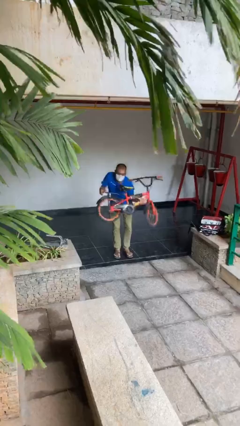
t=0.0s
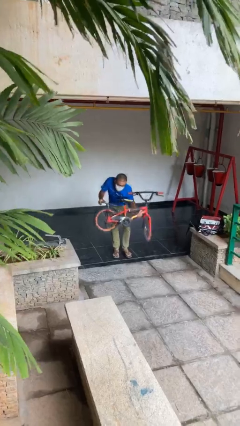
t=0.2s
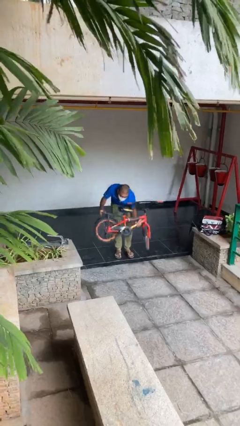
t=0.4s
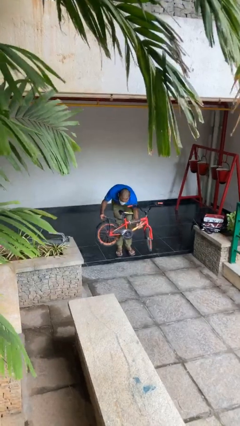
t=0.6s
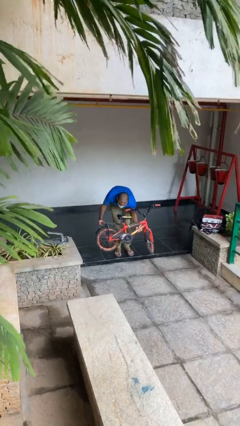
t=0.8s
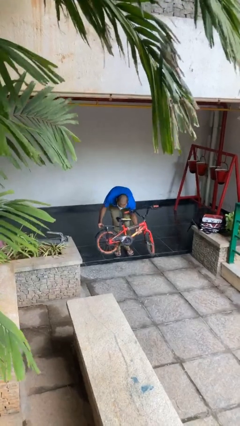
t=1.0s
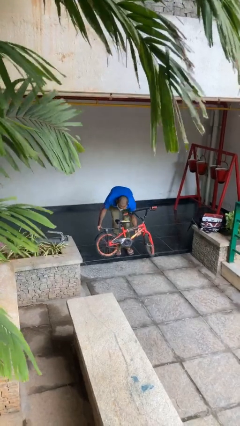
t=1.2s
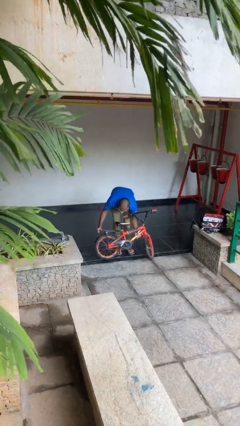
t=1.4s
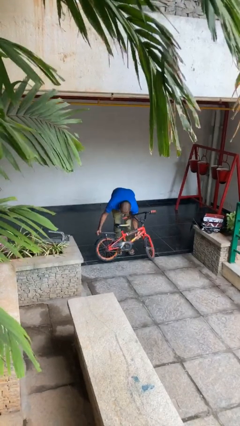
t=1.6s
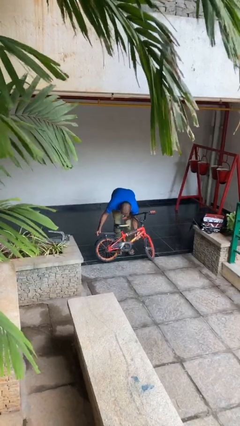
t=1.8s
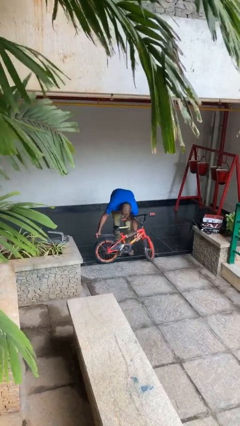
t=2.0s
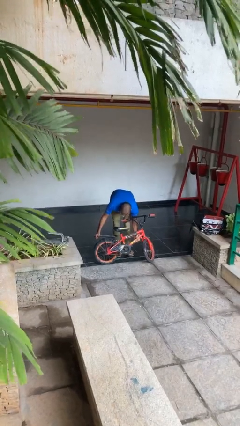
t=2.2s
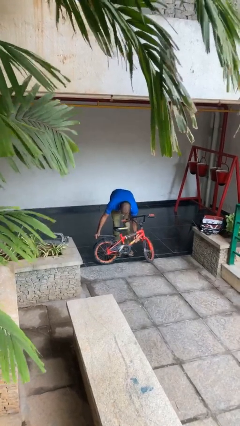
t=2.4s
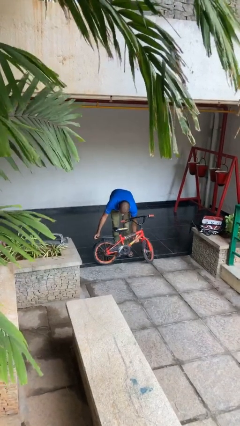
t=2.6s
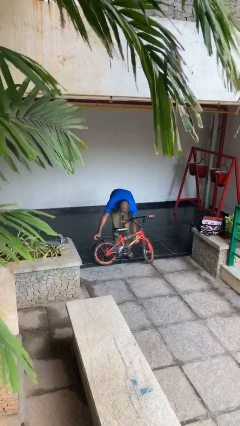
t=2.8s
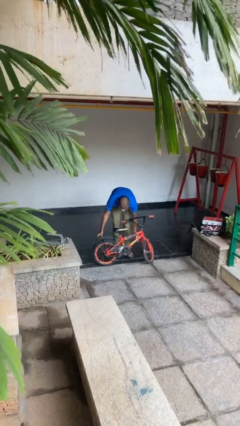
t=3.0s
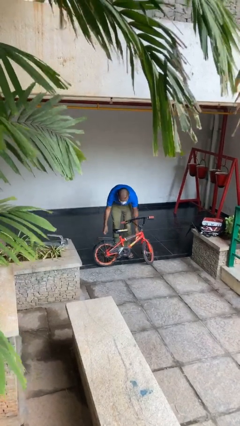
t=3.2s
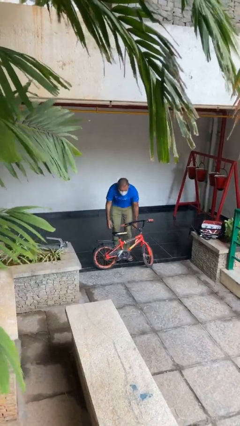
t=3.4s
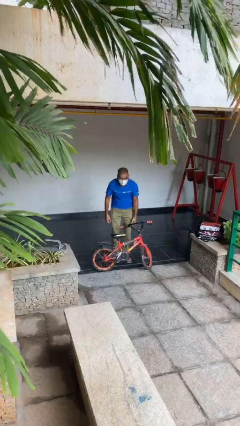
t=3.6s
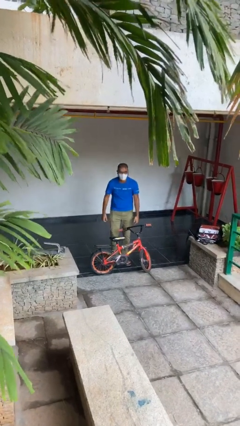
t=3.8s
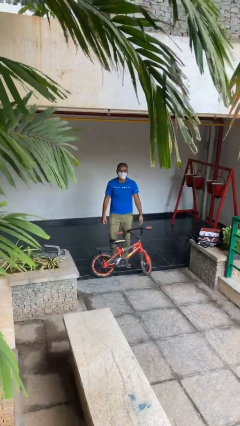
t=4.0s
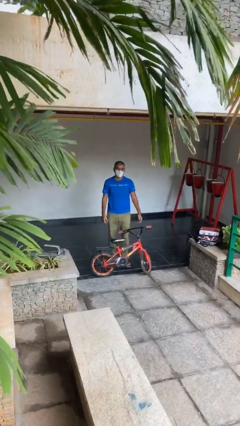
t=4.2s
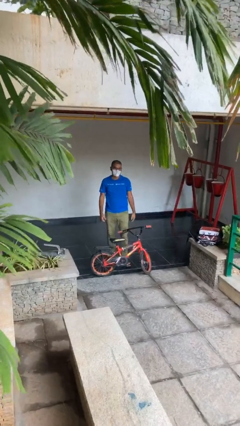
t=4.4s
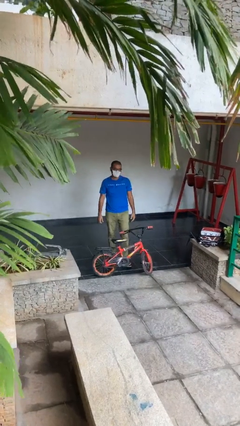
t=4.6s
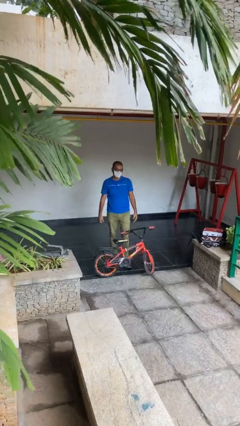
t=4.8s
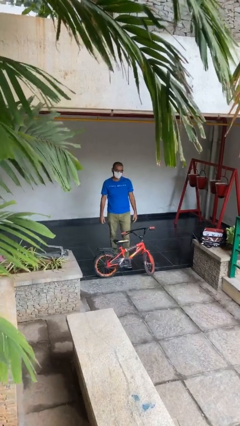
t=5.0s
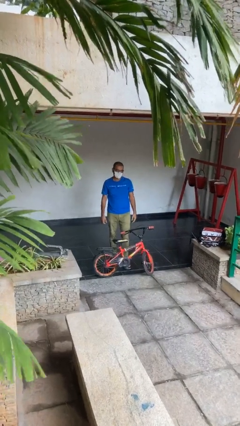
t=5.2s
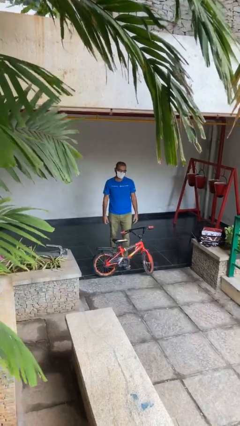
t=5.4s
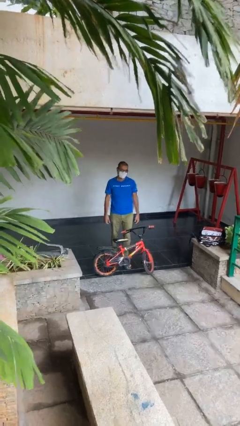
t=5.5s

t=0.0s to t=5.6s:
person puts down object on floor

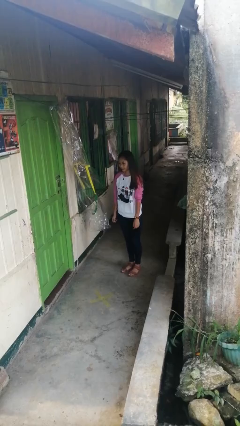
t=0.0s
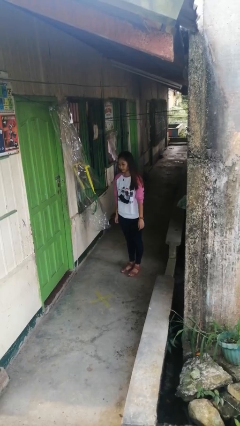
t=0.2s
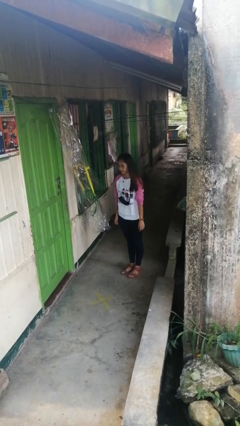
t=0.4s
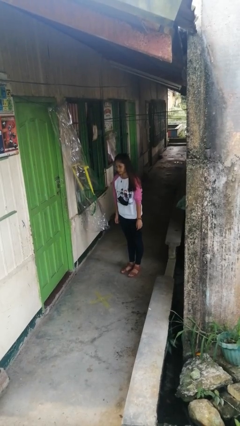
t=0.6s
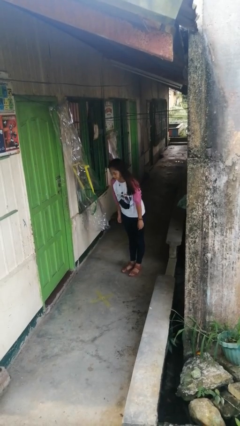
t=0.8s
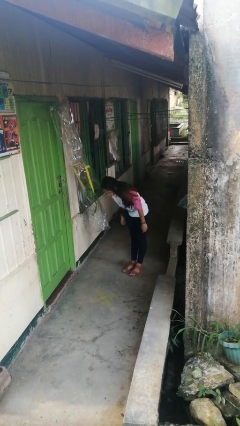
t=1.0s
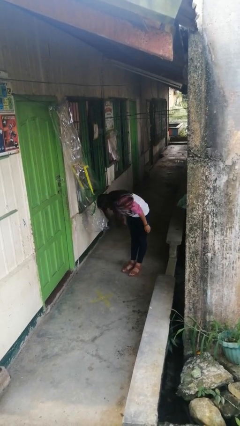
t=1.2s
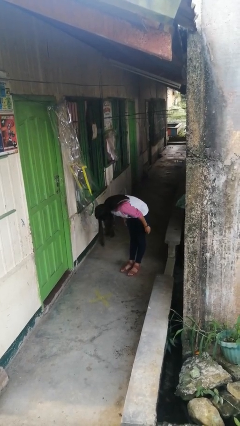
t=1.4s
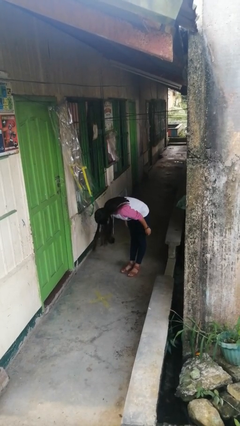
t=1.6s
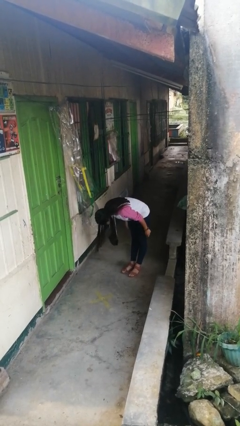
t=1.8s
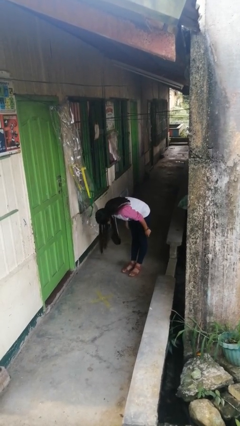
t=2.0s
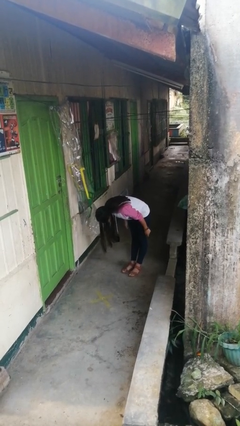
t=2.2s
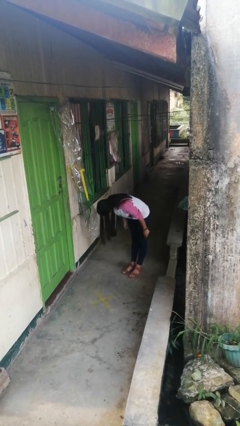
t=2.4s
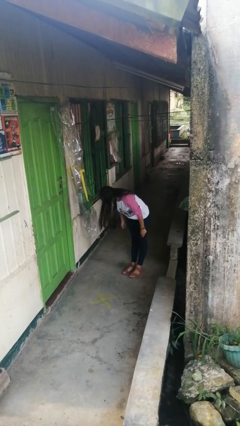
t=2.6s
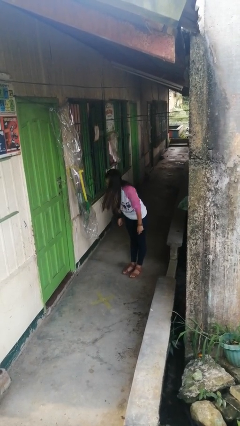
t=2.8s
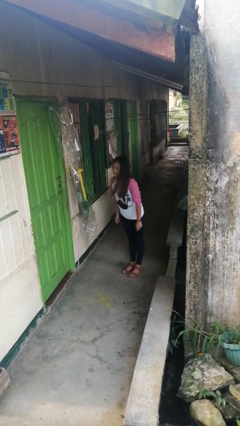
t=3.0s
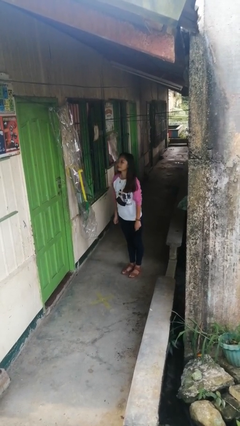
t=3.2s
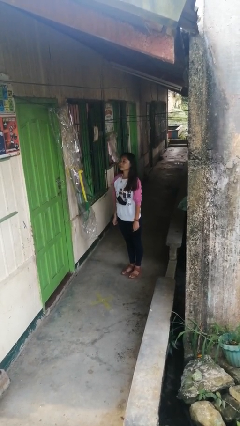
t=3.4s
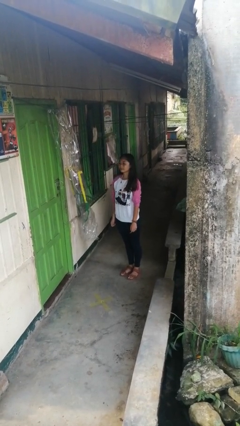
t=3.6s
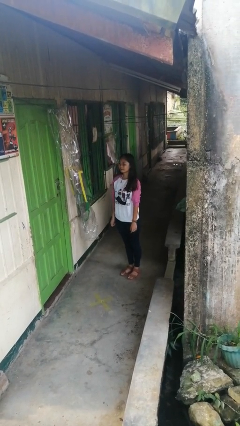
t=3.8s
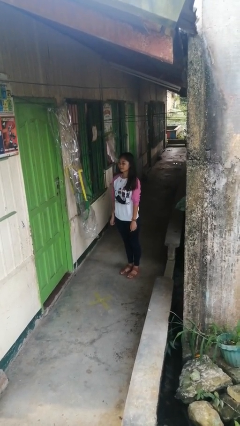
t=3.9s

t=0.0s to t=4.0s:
person bows

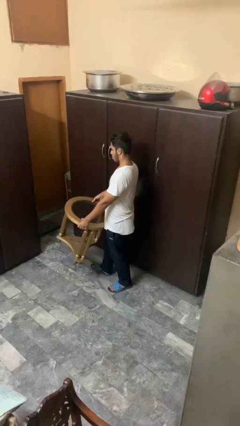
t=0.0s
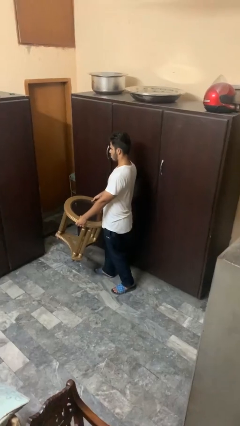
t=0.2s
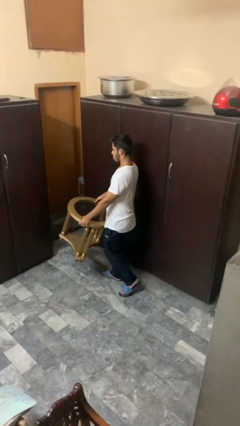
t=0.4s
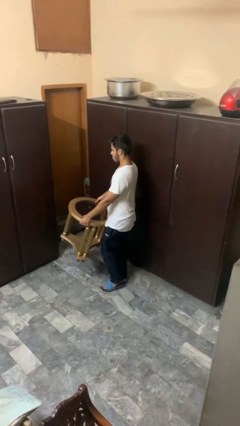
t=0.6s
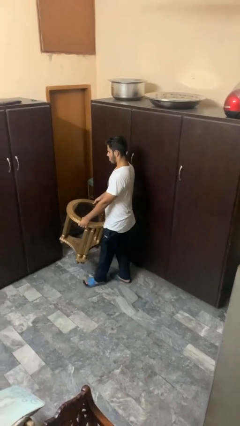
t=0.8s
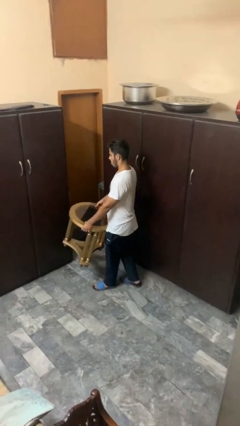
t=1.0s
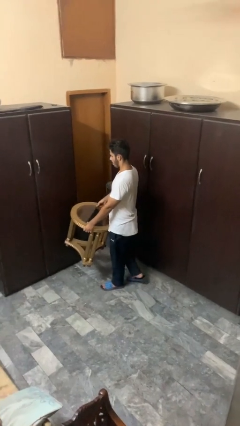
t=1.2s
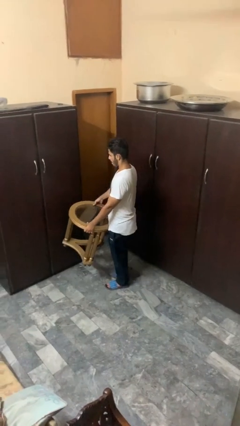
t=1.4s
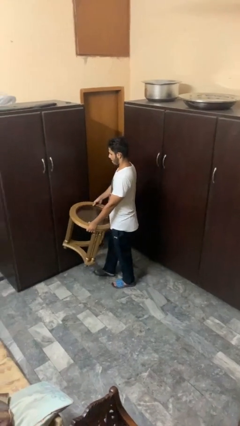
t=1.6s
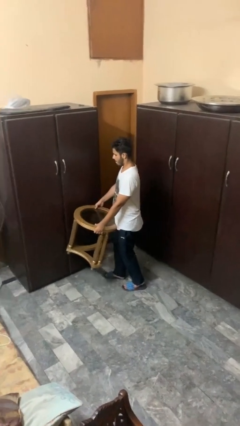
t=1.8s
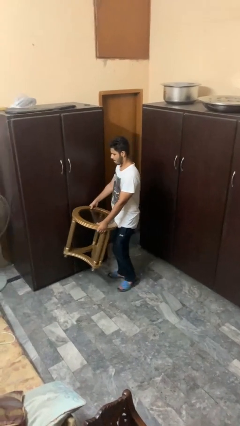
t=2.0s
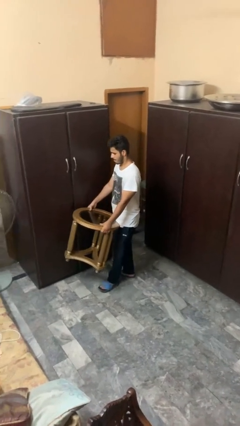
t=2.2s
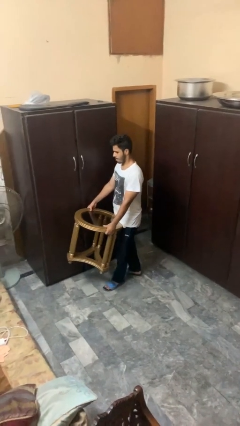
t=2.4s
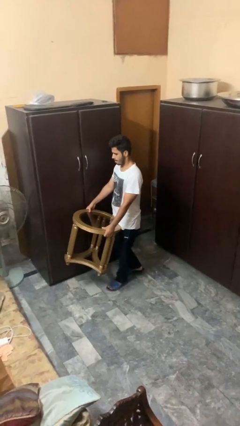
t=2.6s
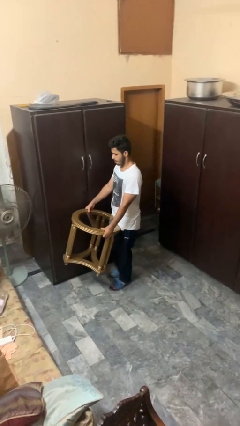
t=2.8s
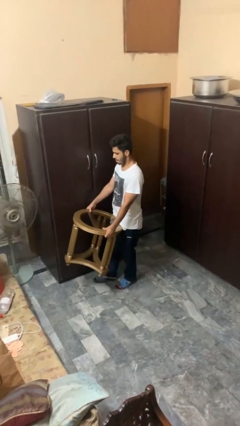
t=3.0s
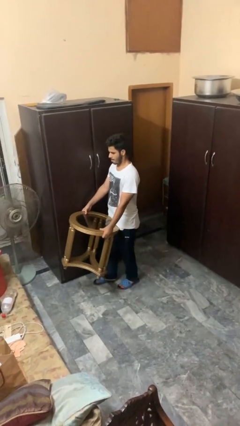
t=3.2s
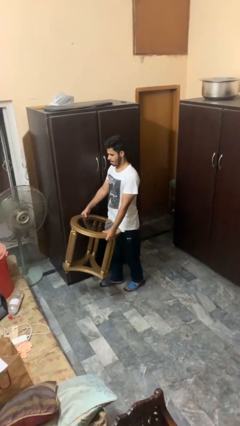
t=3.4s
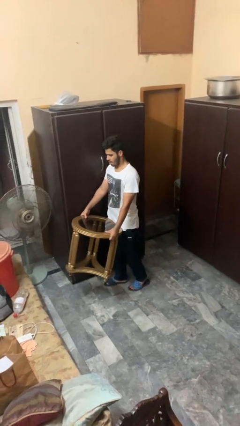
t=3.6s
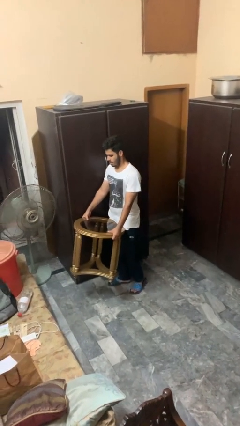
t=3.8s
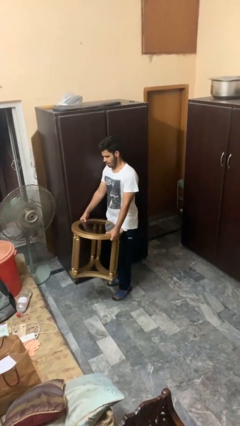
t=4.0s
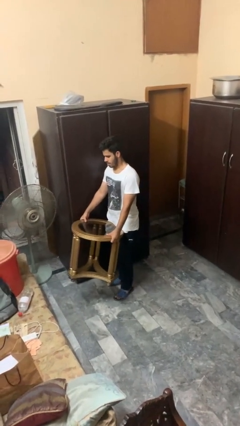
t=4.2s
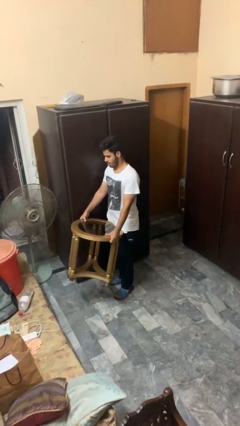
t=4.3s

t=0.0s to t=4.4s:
person carries furniture

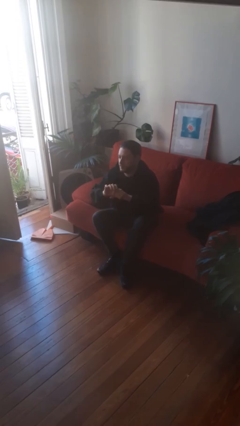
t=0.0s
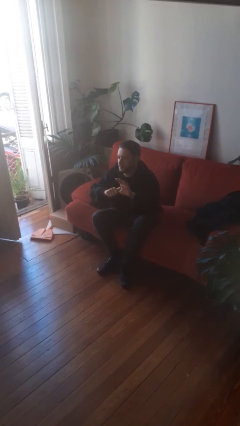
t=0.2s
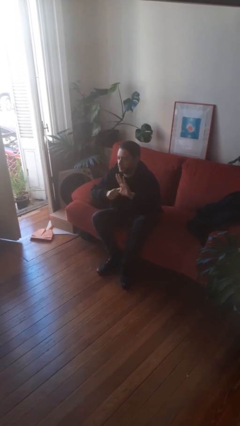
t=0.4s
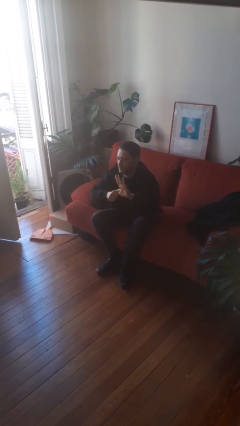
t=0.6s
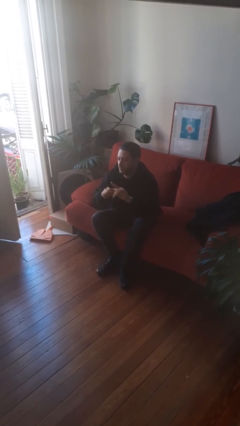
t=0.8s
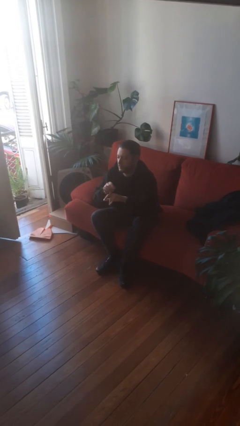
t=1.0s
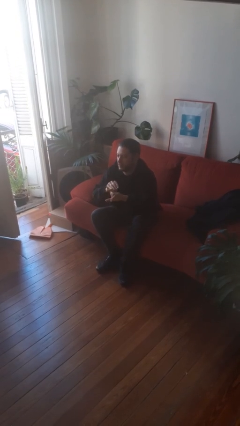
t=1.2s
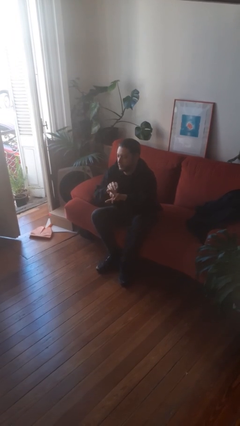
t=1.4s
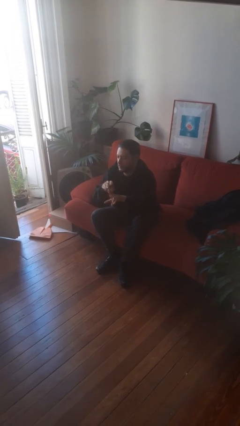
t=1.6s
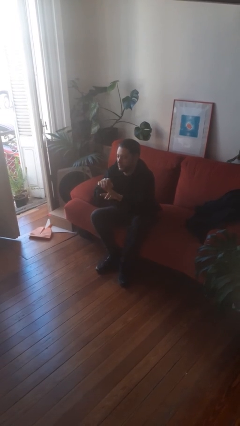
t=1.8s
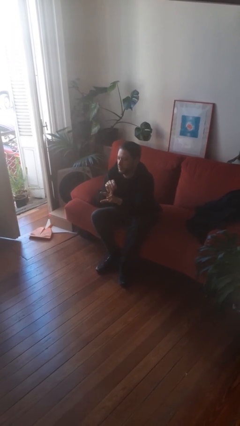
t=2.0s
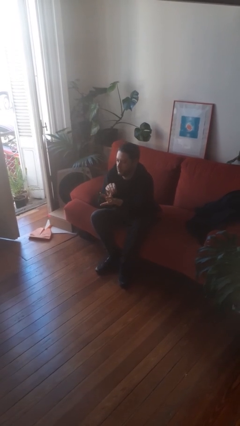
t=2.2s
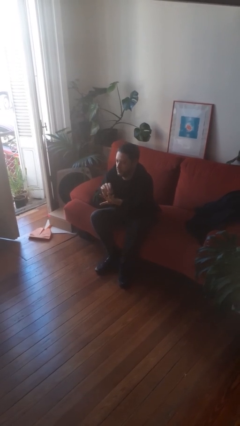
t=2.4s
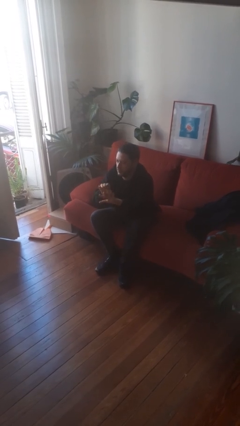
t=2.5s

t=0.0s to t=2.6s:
person cracks knuckles

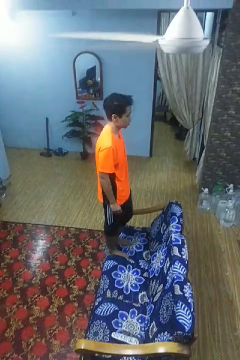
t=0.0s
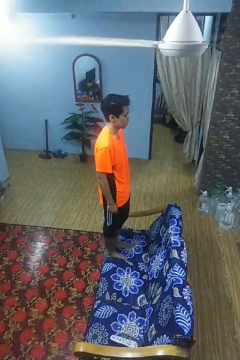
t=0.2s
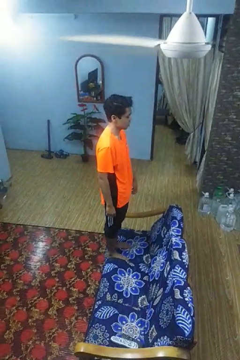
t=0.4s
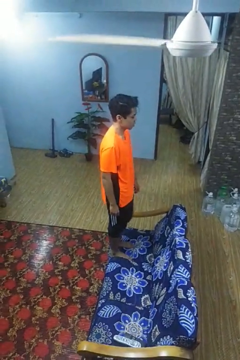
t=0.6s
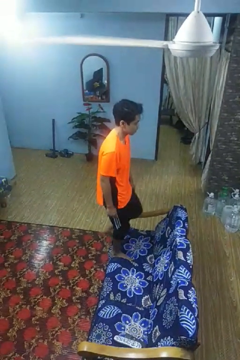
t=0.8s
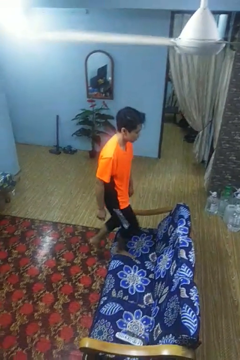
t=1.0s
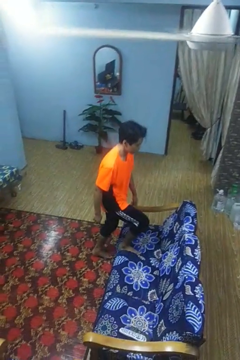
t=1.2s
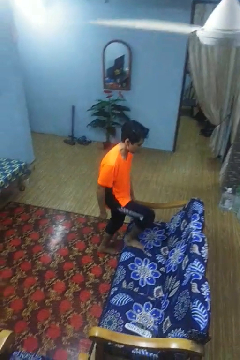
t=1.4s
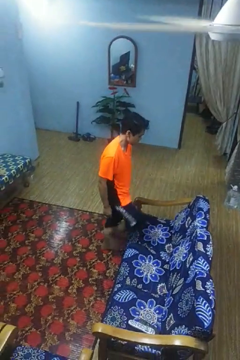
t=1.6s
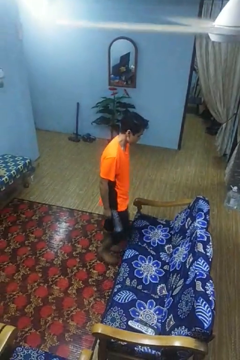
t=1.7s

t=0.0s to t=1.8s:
person climbs off couch
